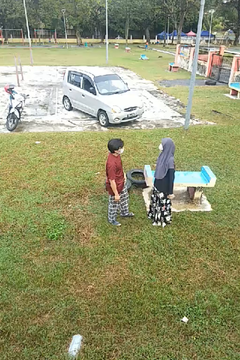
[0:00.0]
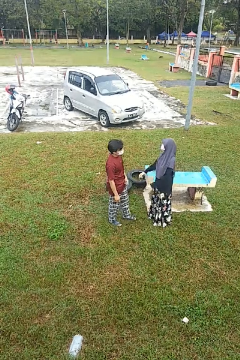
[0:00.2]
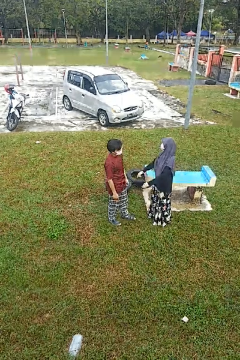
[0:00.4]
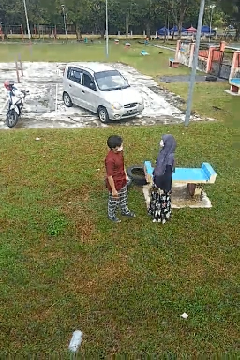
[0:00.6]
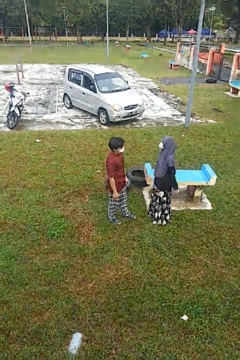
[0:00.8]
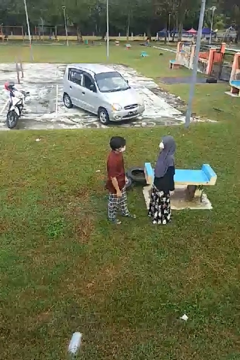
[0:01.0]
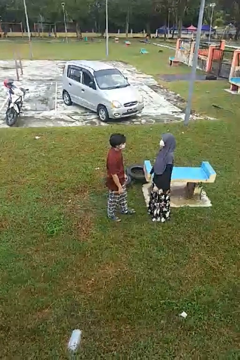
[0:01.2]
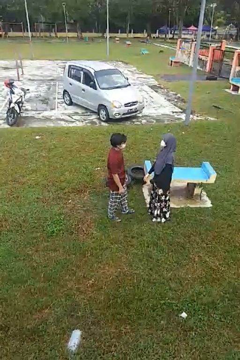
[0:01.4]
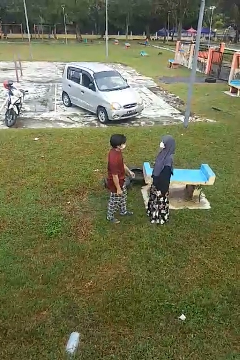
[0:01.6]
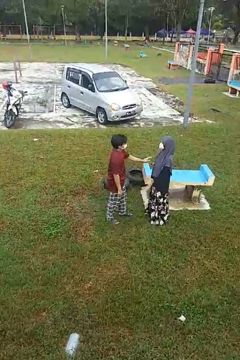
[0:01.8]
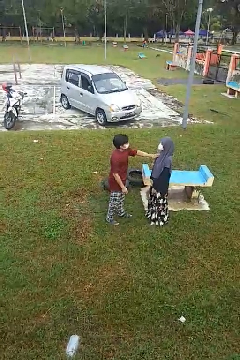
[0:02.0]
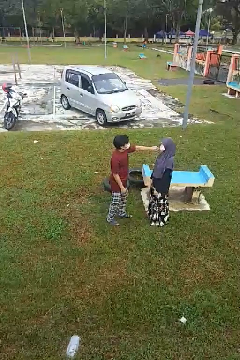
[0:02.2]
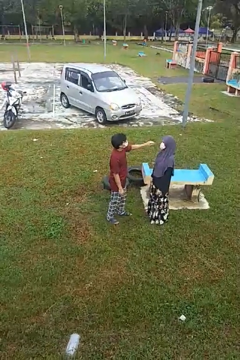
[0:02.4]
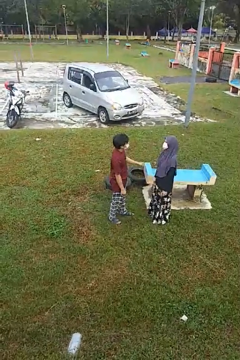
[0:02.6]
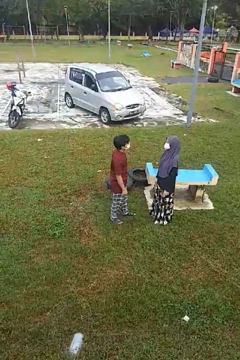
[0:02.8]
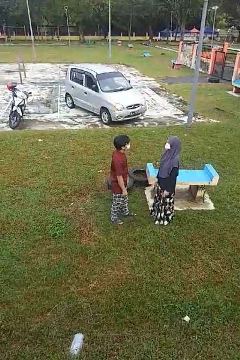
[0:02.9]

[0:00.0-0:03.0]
person shoves person

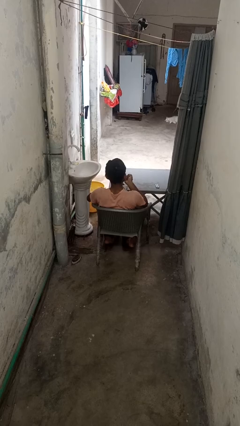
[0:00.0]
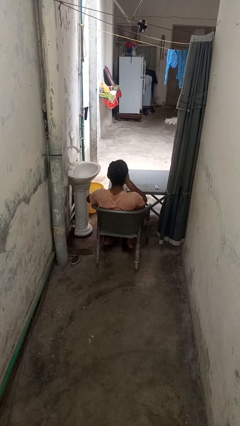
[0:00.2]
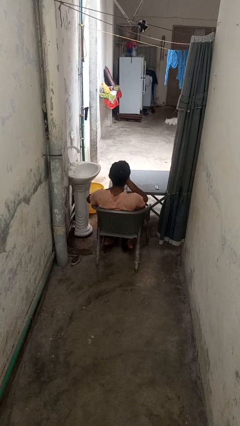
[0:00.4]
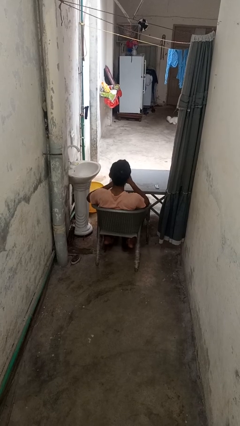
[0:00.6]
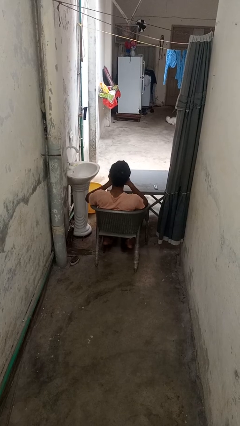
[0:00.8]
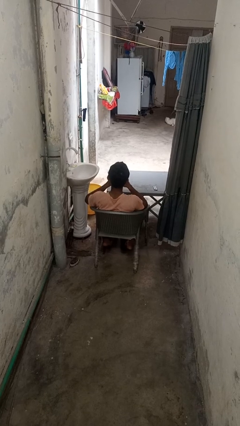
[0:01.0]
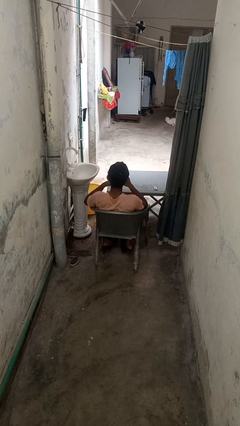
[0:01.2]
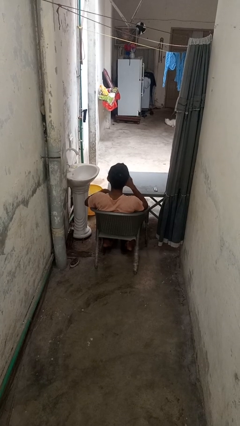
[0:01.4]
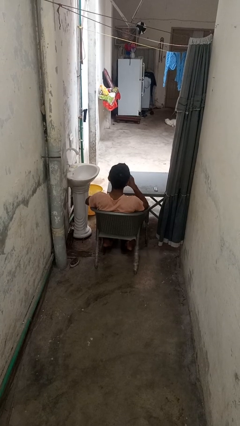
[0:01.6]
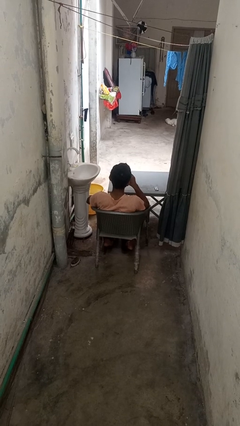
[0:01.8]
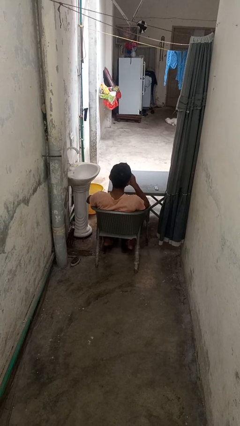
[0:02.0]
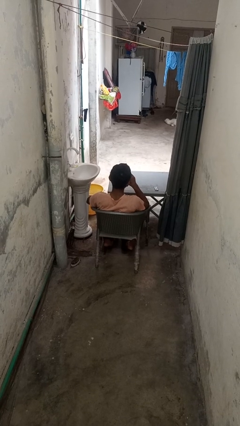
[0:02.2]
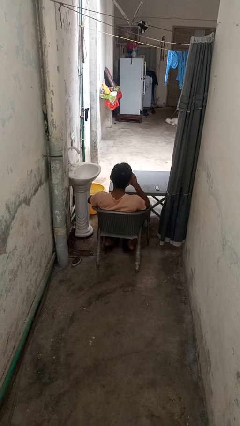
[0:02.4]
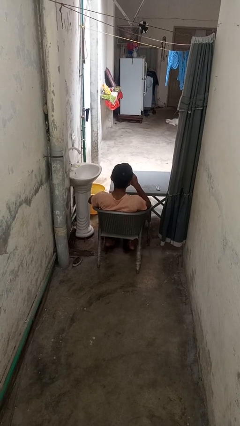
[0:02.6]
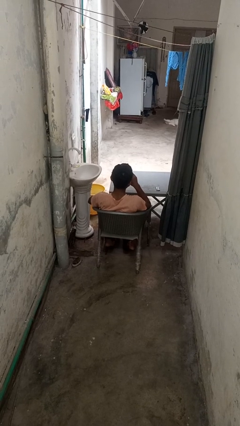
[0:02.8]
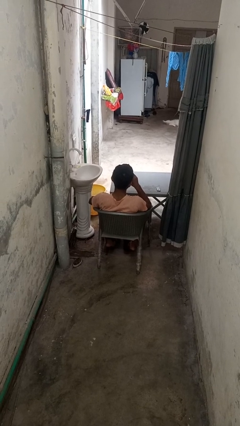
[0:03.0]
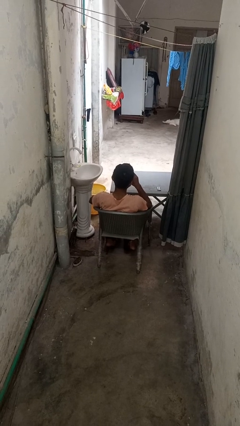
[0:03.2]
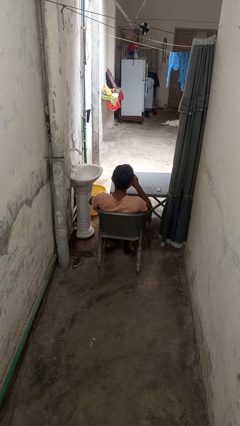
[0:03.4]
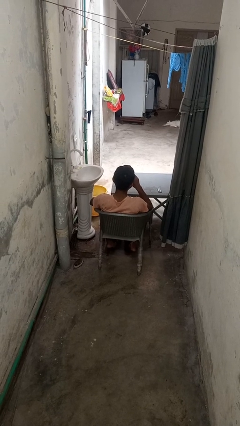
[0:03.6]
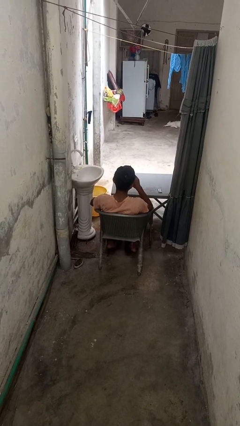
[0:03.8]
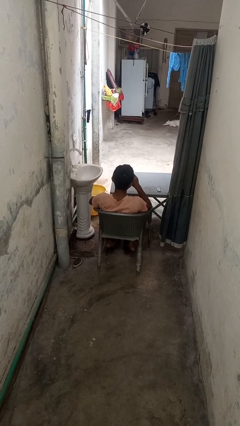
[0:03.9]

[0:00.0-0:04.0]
person drinks from cup

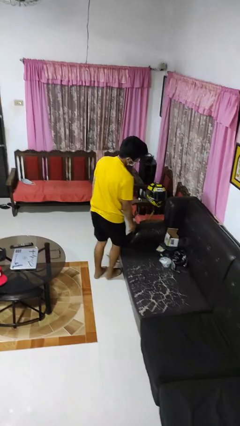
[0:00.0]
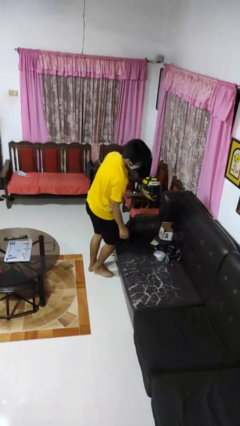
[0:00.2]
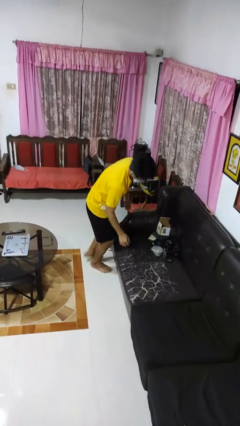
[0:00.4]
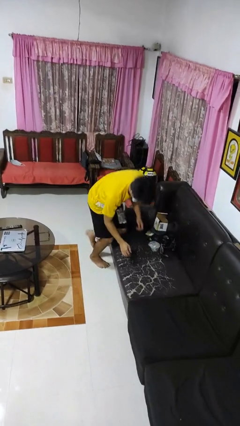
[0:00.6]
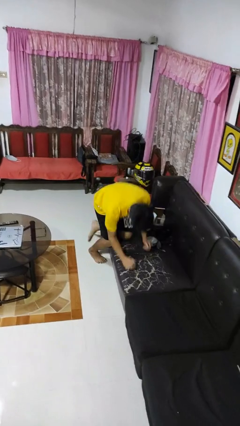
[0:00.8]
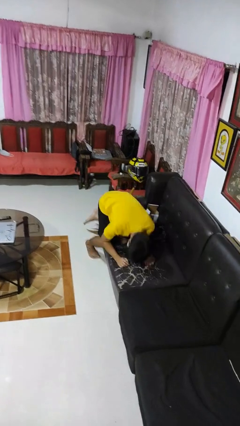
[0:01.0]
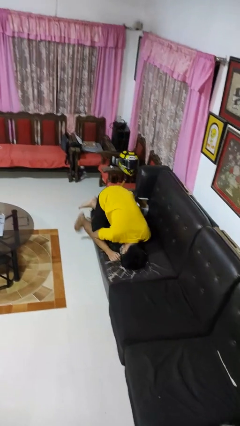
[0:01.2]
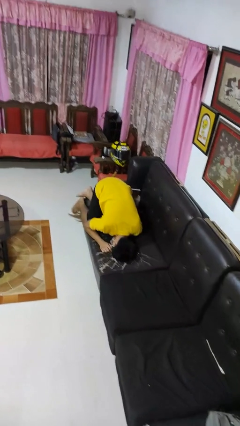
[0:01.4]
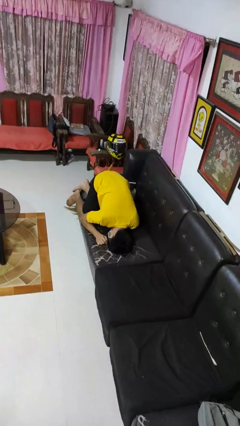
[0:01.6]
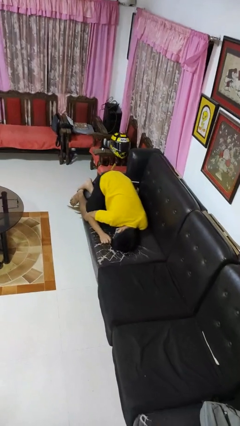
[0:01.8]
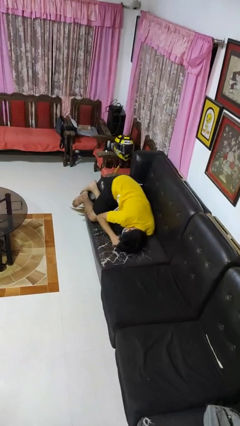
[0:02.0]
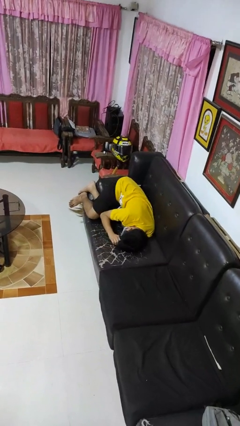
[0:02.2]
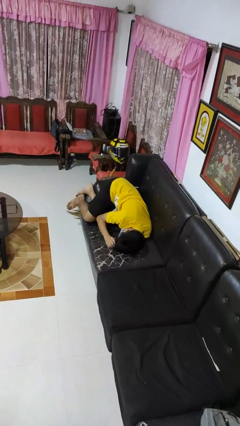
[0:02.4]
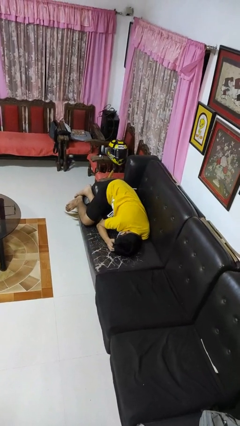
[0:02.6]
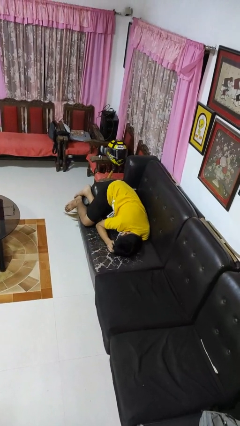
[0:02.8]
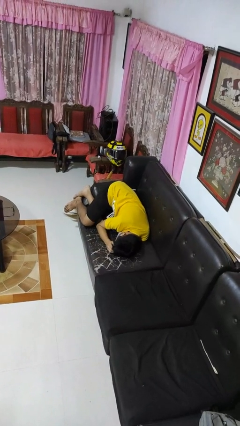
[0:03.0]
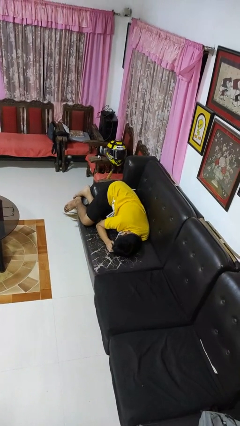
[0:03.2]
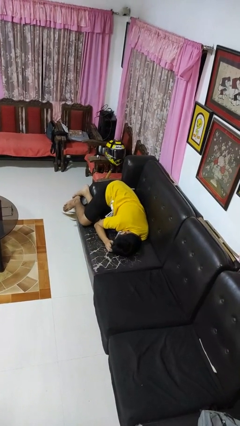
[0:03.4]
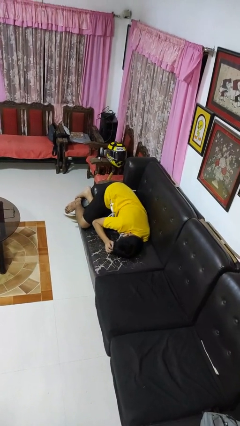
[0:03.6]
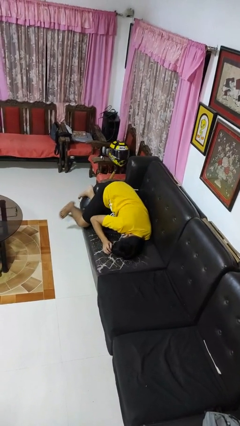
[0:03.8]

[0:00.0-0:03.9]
person lies down on couch

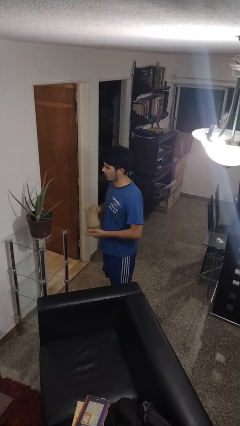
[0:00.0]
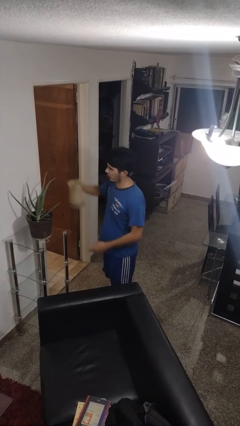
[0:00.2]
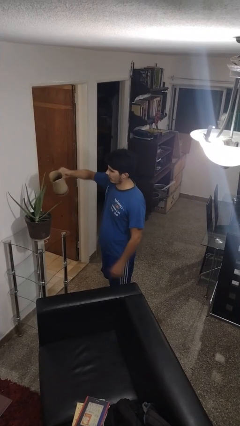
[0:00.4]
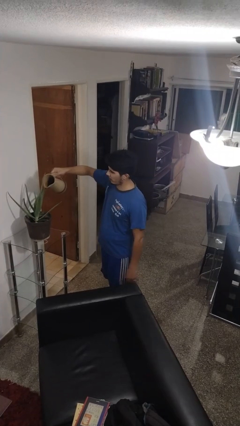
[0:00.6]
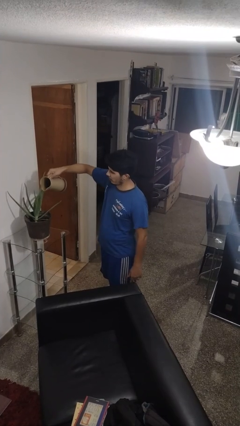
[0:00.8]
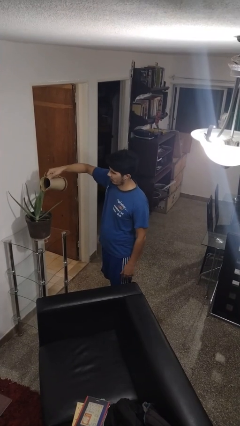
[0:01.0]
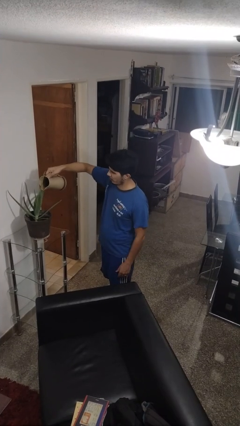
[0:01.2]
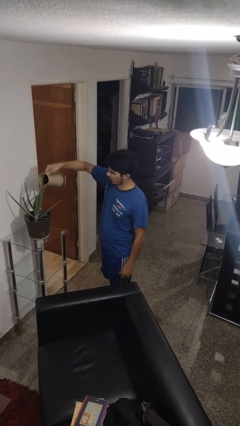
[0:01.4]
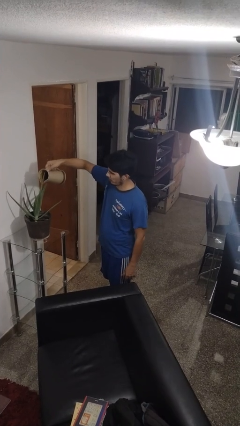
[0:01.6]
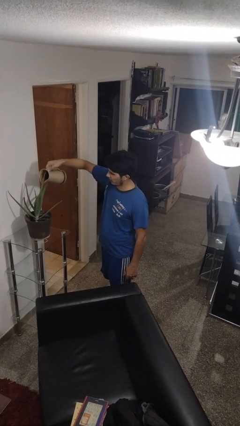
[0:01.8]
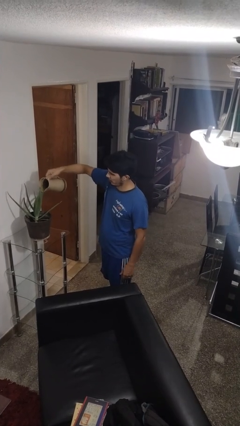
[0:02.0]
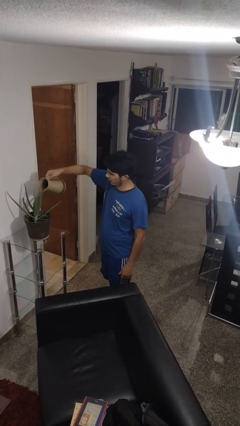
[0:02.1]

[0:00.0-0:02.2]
person waters houseplant

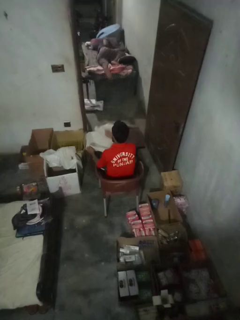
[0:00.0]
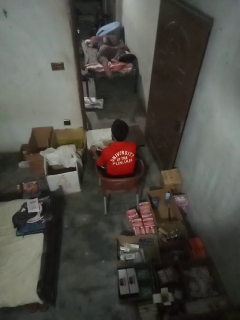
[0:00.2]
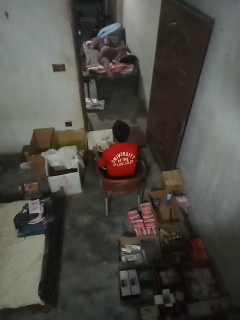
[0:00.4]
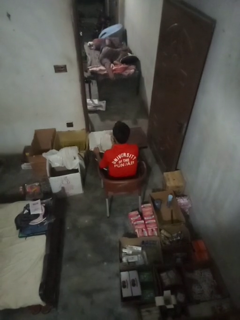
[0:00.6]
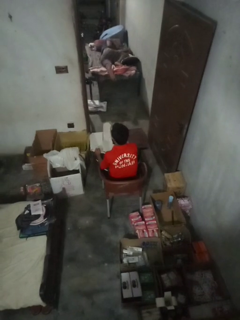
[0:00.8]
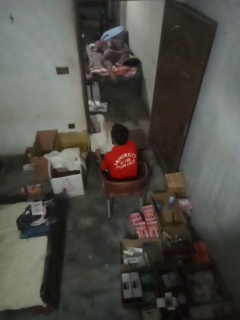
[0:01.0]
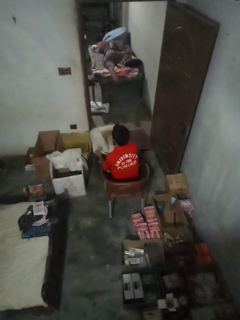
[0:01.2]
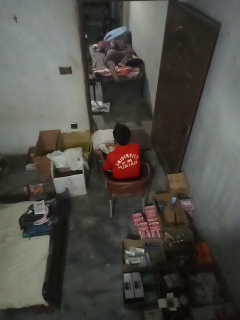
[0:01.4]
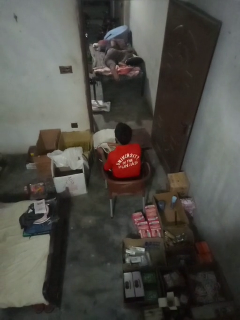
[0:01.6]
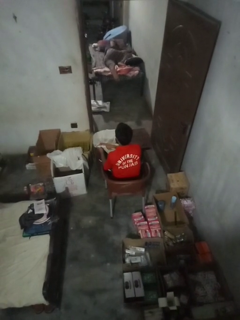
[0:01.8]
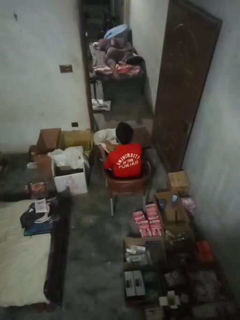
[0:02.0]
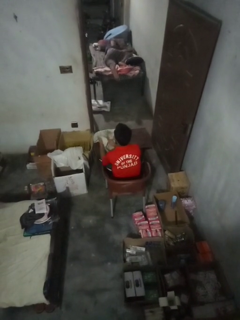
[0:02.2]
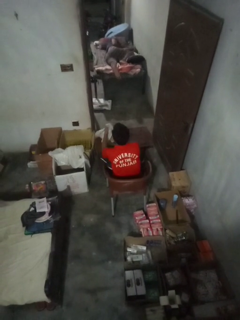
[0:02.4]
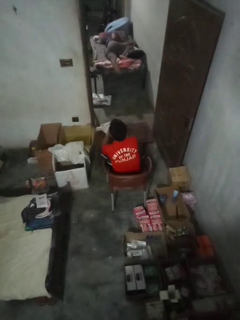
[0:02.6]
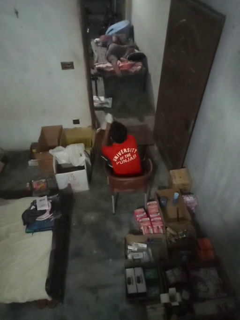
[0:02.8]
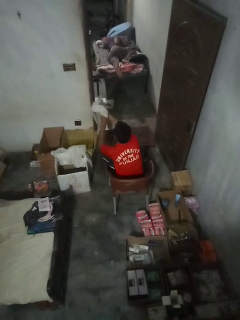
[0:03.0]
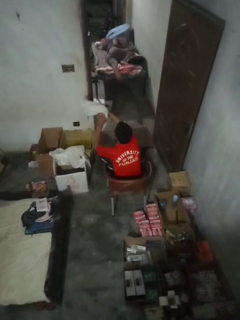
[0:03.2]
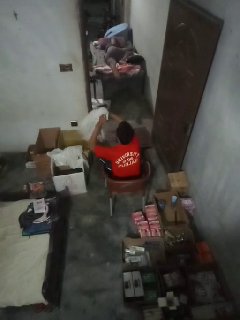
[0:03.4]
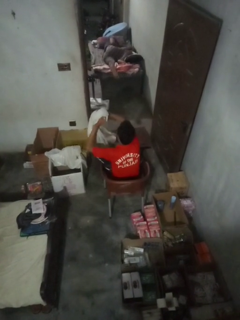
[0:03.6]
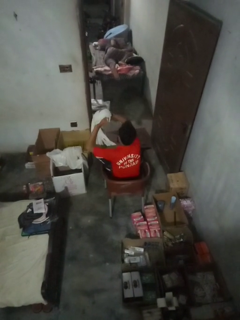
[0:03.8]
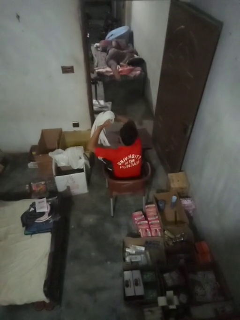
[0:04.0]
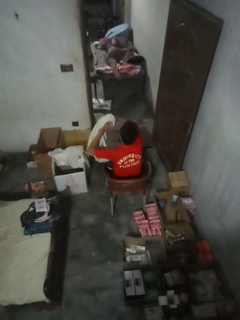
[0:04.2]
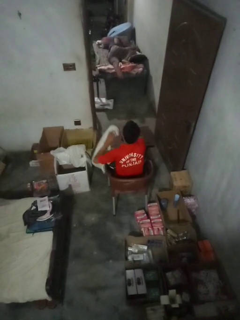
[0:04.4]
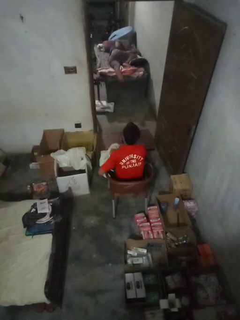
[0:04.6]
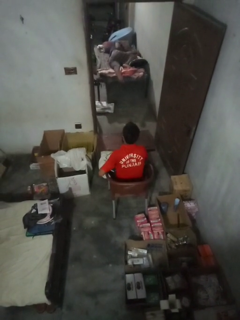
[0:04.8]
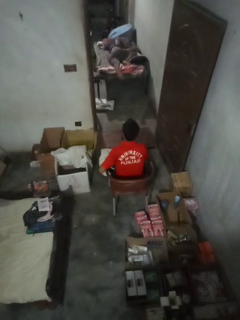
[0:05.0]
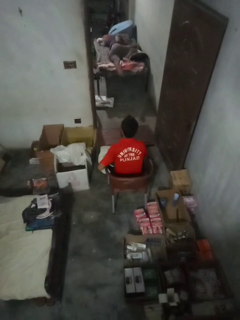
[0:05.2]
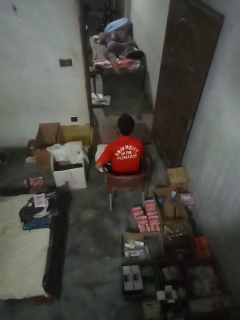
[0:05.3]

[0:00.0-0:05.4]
person folds tablecloth

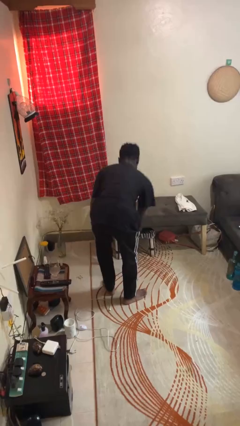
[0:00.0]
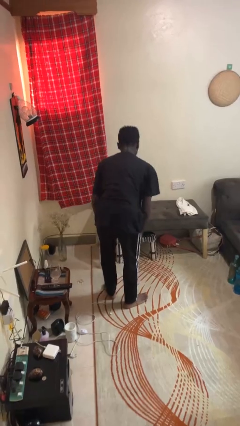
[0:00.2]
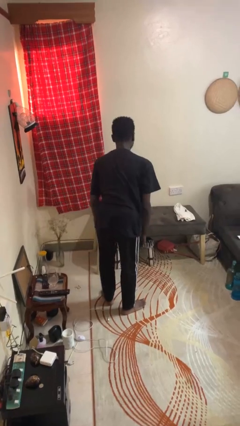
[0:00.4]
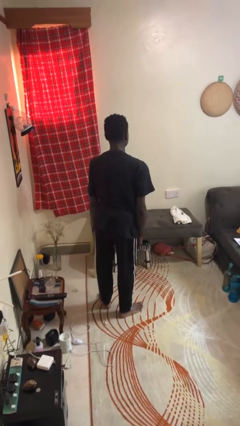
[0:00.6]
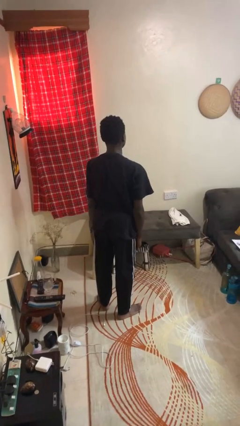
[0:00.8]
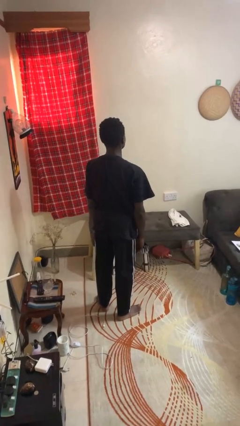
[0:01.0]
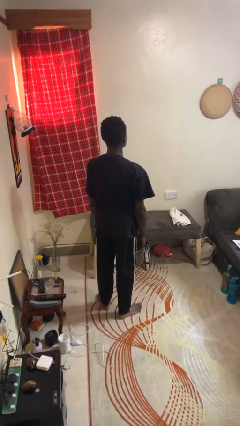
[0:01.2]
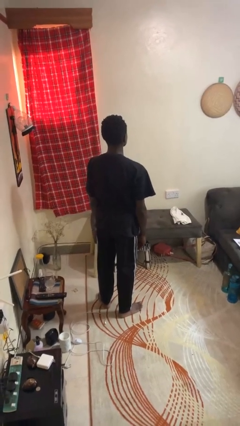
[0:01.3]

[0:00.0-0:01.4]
person pulls out chair
